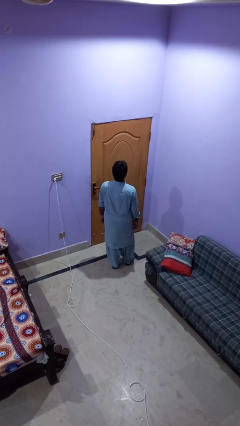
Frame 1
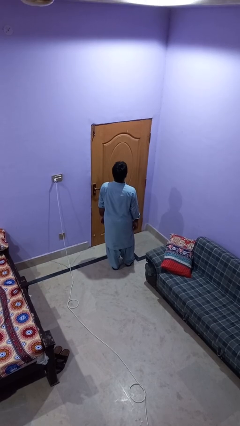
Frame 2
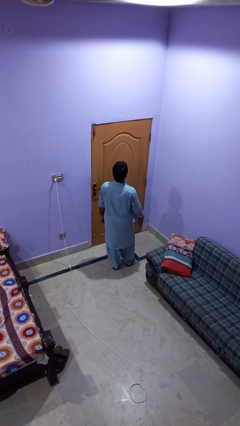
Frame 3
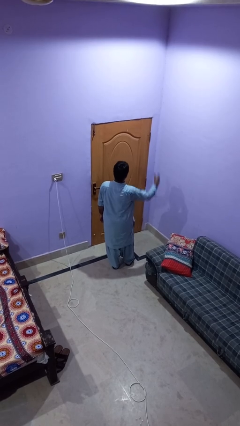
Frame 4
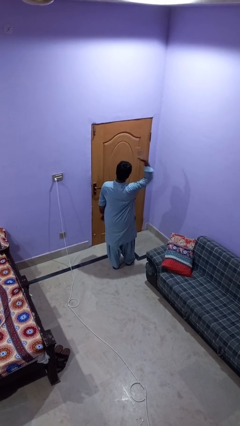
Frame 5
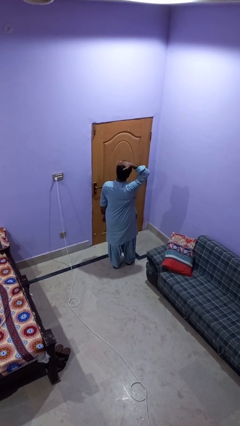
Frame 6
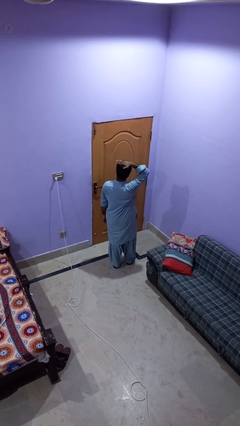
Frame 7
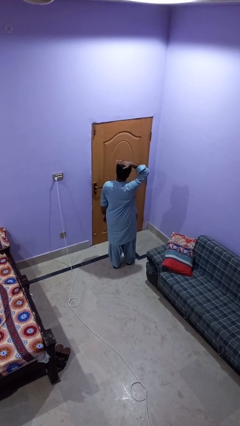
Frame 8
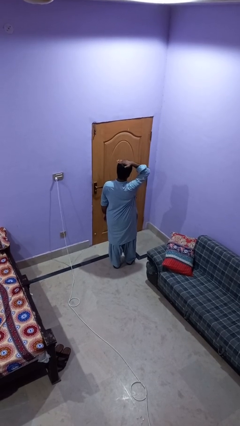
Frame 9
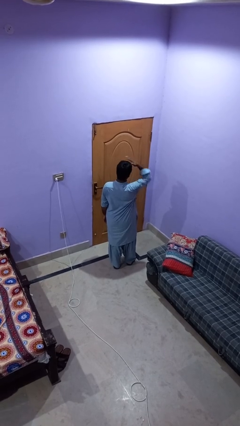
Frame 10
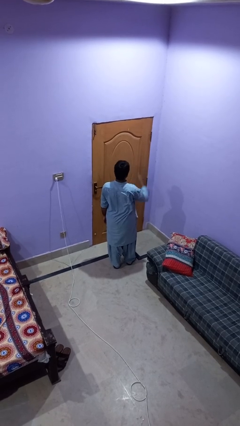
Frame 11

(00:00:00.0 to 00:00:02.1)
person pats head

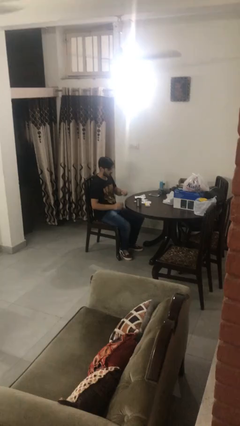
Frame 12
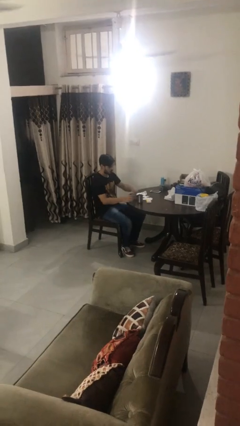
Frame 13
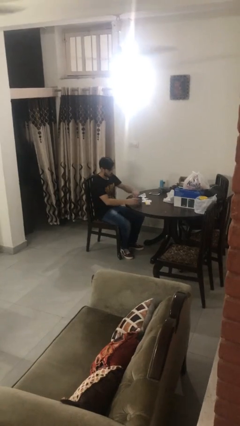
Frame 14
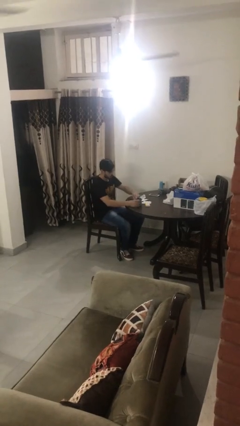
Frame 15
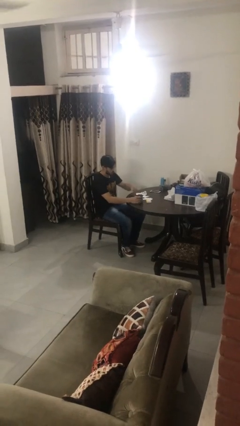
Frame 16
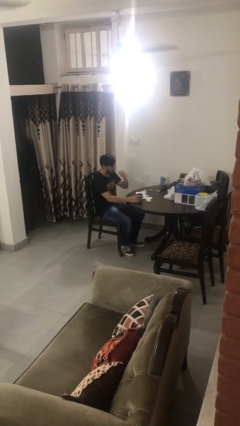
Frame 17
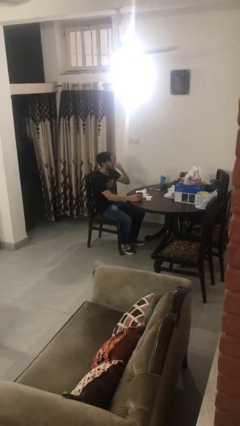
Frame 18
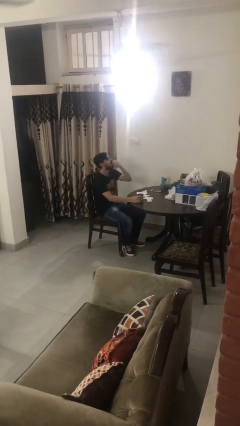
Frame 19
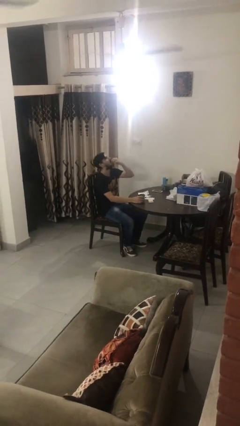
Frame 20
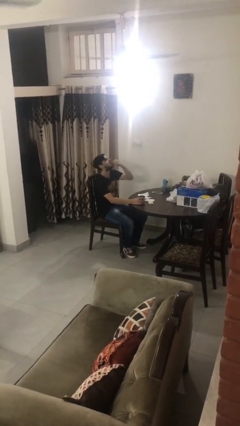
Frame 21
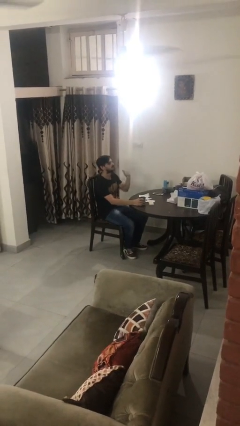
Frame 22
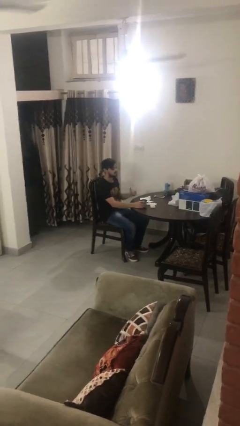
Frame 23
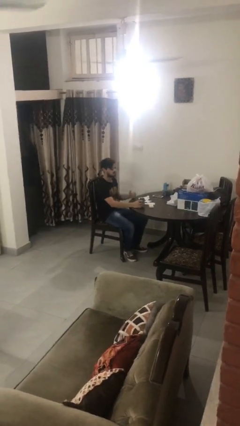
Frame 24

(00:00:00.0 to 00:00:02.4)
person takes medicine pills

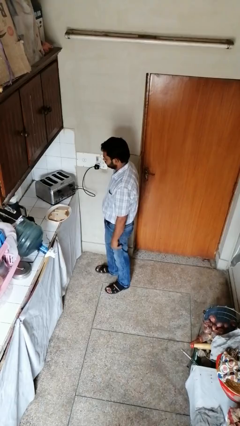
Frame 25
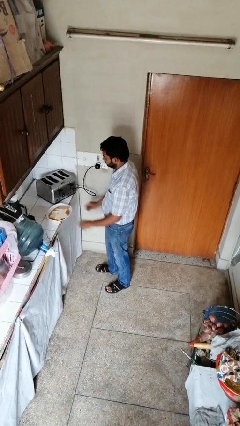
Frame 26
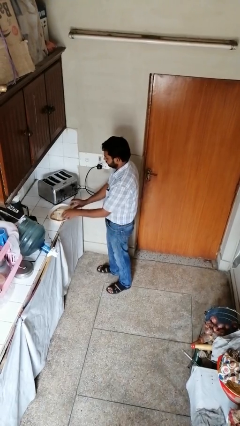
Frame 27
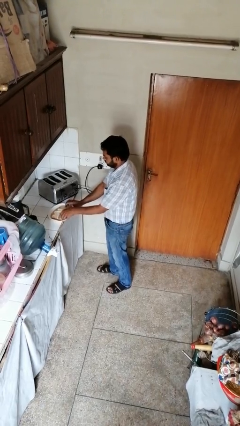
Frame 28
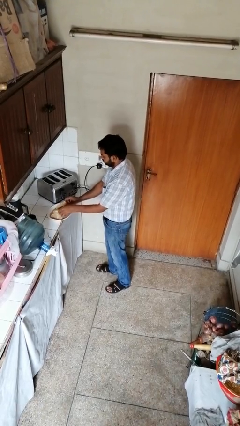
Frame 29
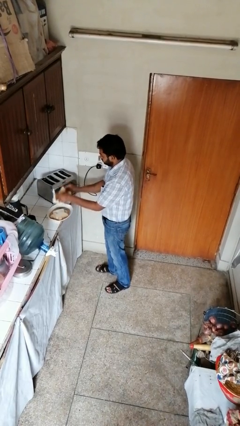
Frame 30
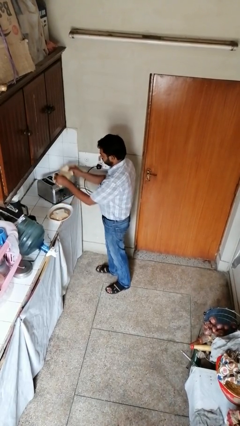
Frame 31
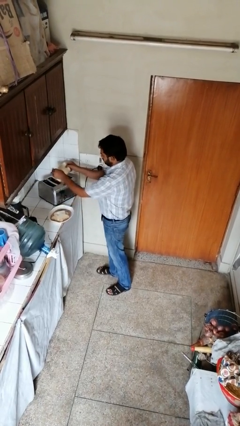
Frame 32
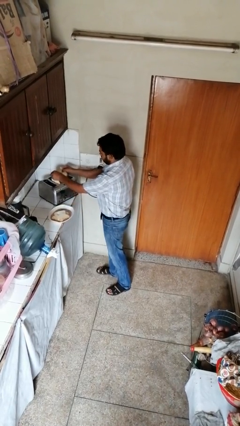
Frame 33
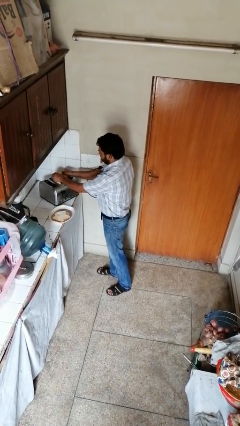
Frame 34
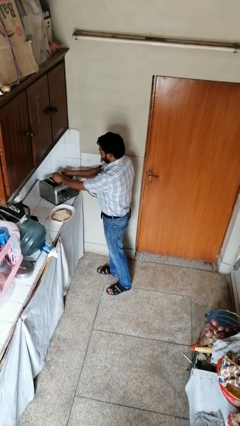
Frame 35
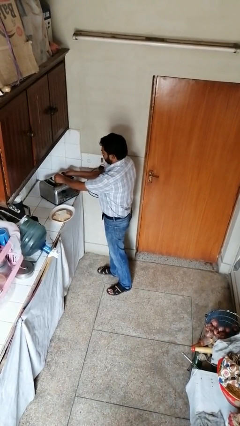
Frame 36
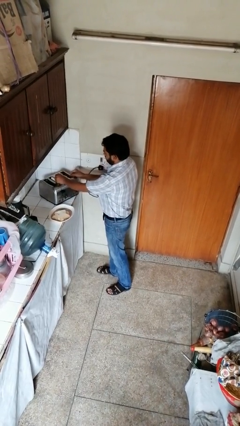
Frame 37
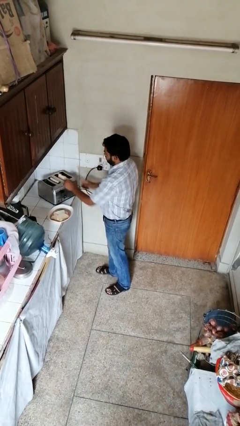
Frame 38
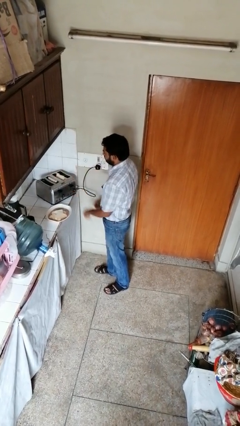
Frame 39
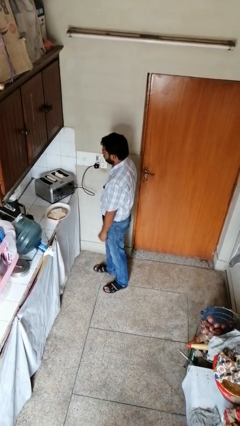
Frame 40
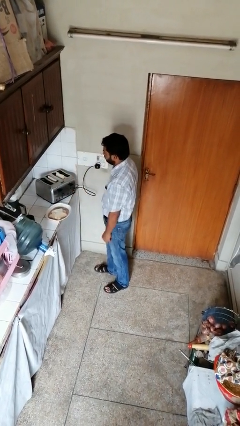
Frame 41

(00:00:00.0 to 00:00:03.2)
person puts object into toaster

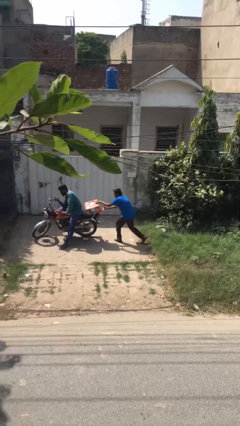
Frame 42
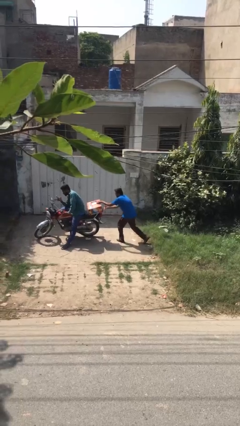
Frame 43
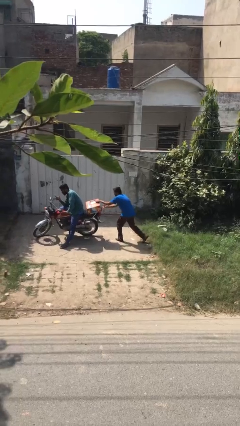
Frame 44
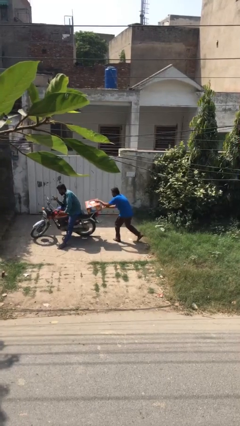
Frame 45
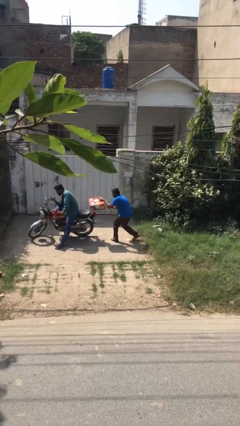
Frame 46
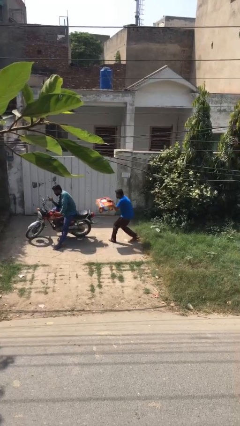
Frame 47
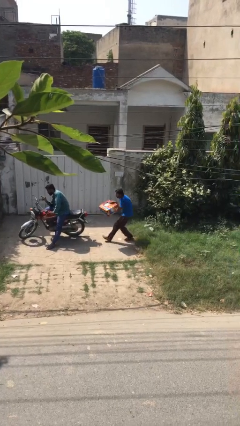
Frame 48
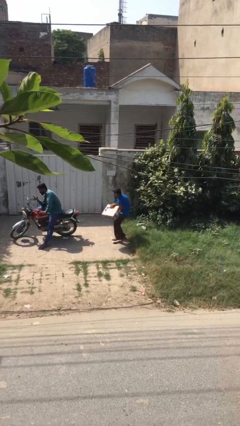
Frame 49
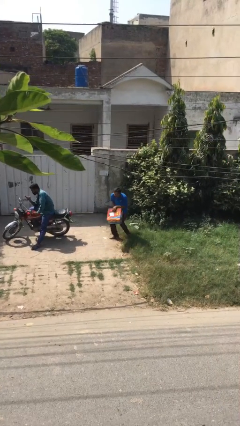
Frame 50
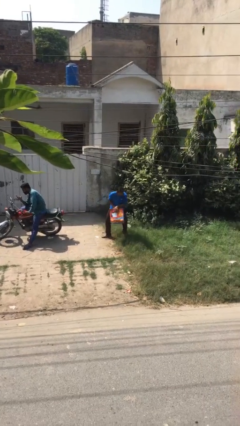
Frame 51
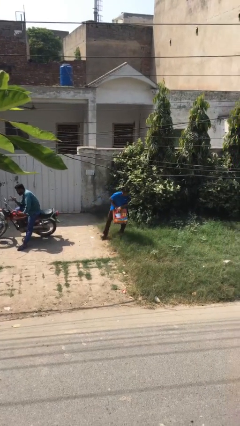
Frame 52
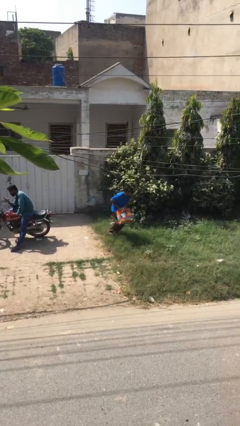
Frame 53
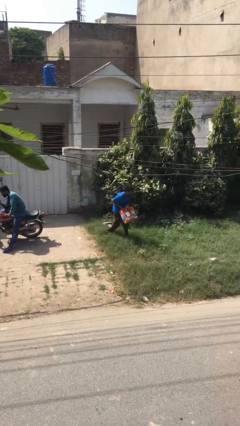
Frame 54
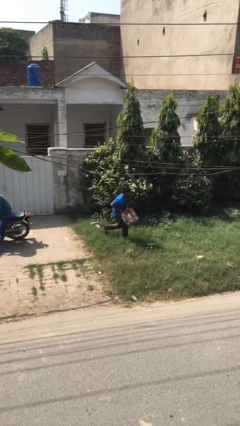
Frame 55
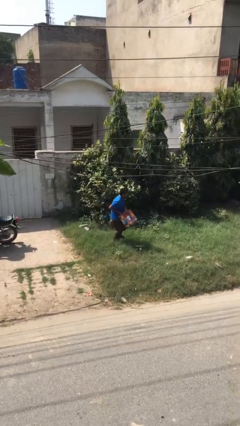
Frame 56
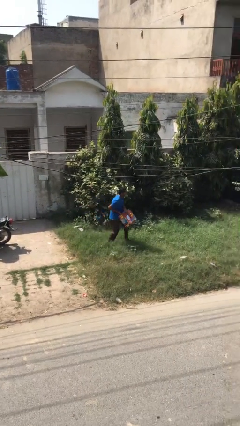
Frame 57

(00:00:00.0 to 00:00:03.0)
person steals object from person

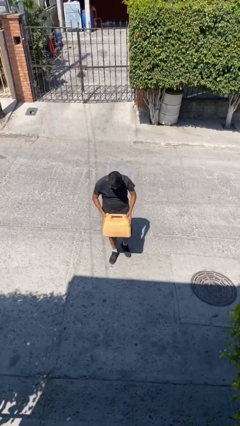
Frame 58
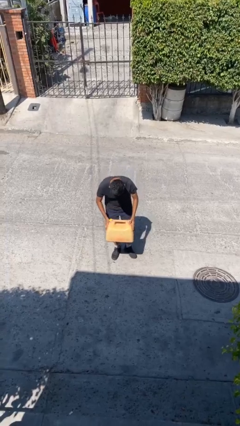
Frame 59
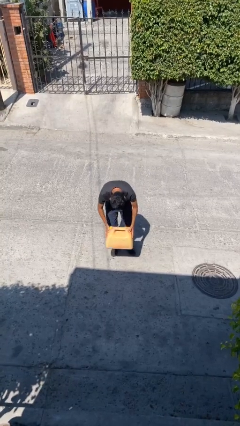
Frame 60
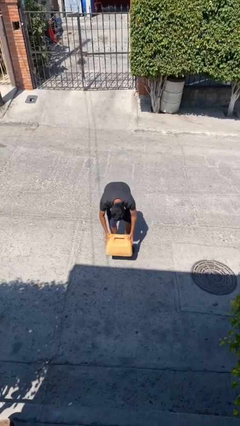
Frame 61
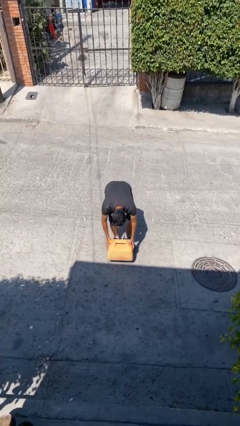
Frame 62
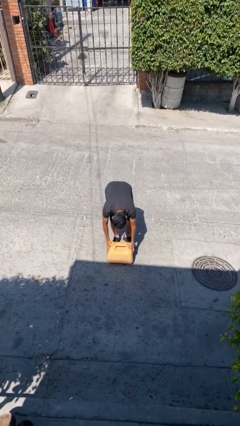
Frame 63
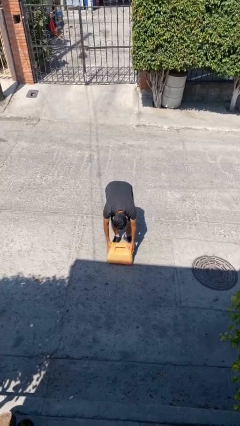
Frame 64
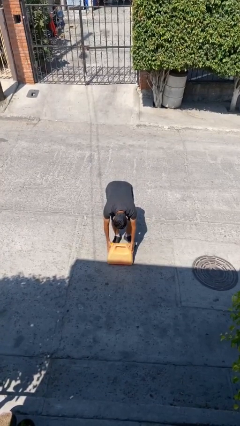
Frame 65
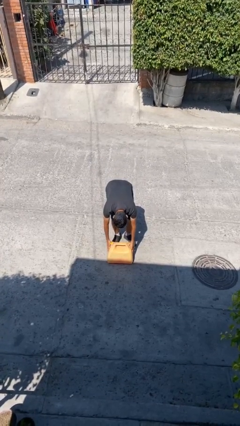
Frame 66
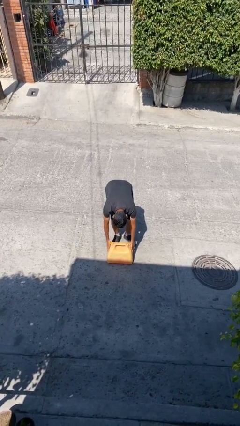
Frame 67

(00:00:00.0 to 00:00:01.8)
person puts down object on floor

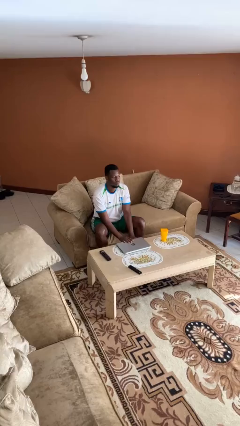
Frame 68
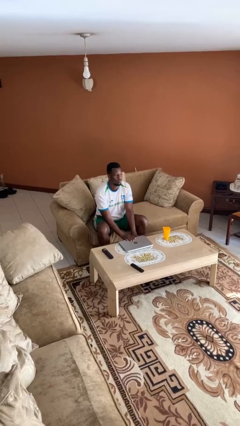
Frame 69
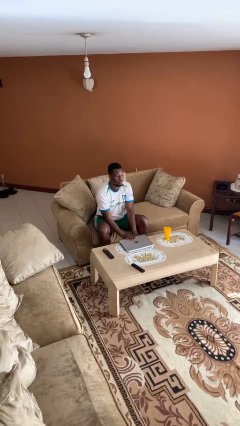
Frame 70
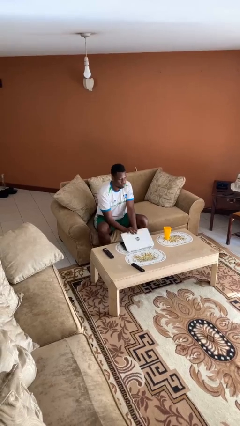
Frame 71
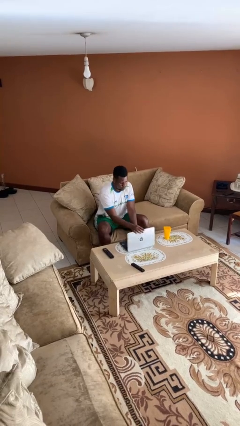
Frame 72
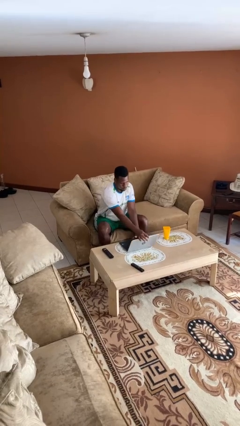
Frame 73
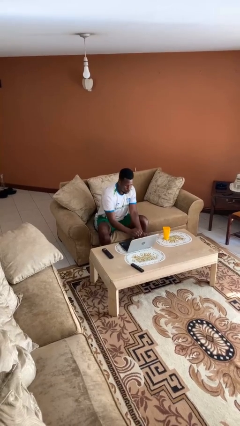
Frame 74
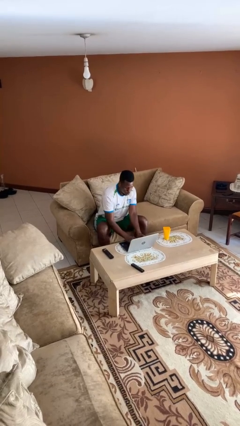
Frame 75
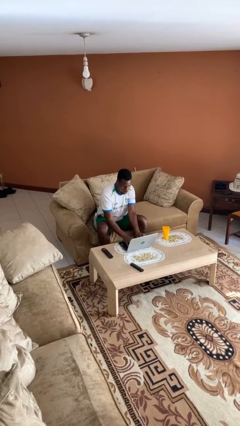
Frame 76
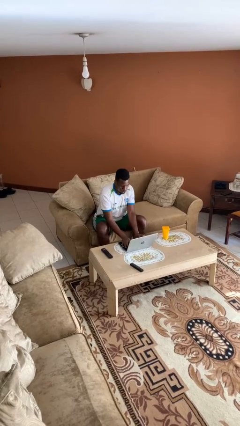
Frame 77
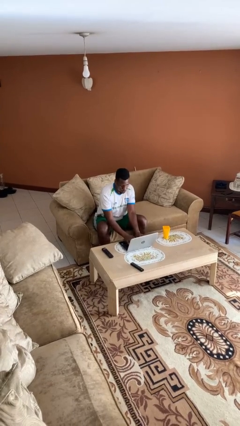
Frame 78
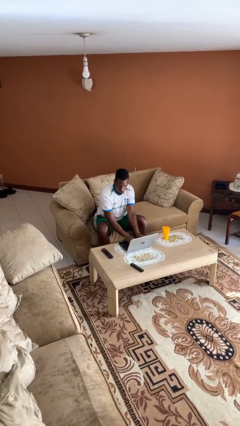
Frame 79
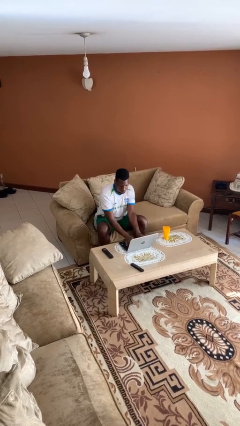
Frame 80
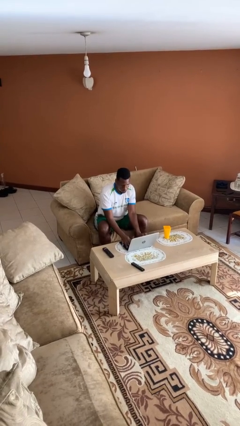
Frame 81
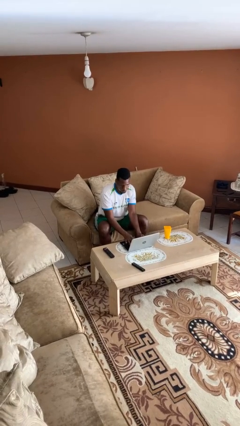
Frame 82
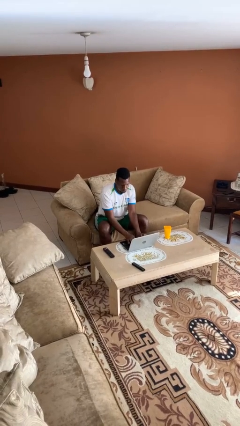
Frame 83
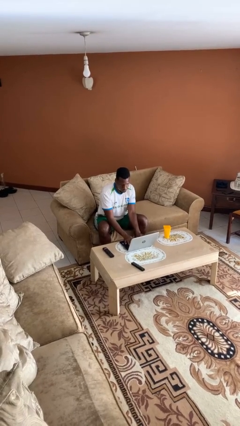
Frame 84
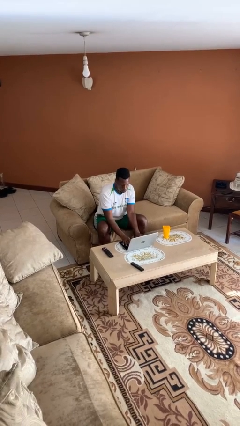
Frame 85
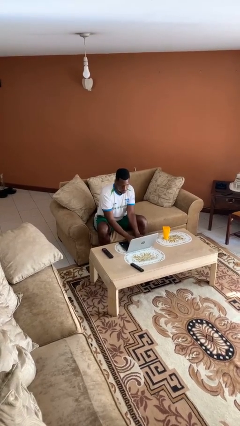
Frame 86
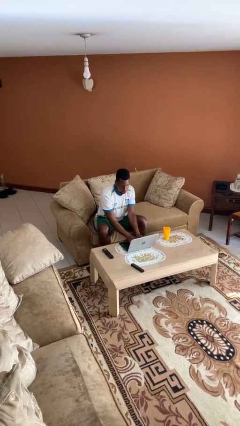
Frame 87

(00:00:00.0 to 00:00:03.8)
person interacts with laptop

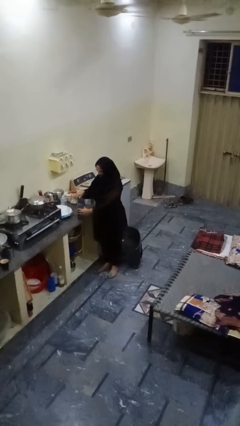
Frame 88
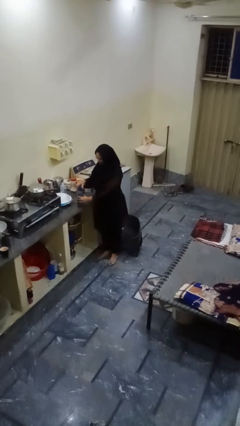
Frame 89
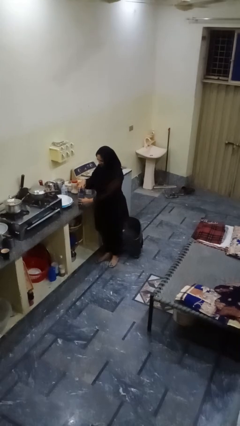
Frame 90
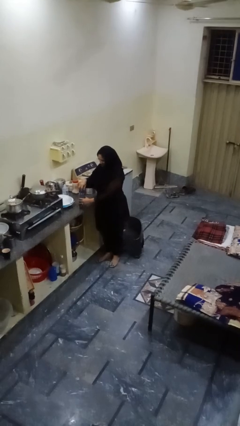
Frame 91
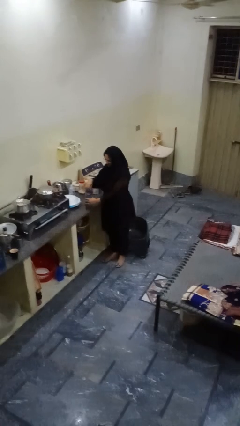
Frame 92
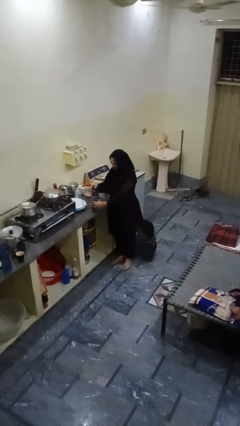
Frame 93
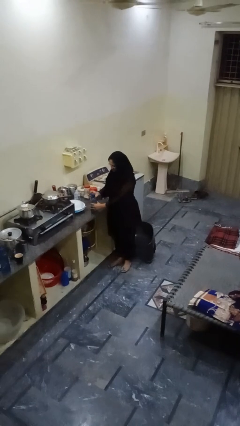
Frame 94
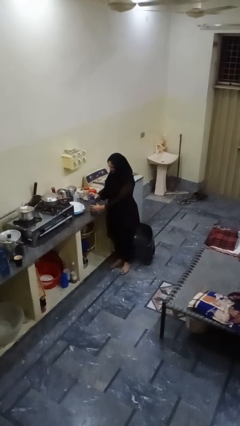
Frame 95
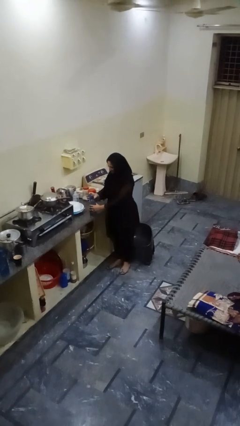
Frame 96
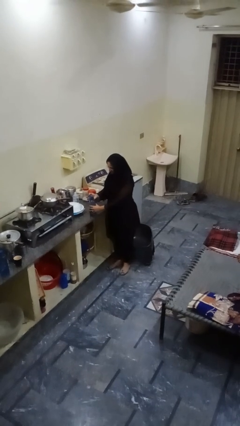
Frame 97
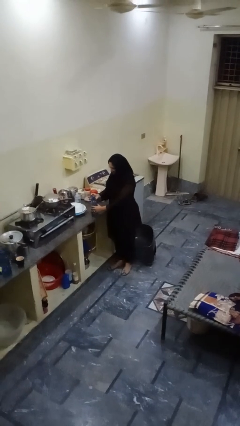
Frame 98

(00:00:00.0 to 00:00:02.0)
person unscrews lid from bottle
